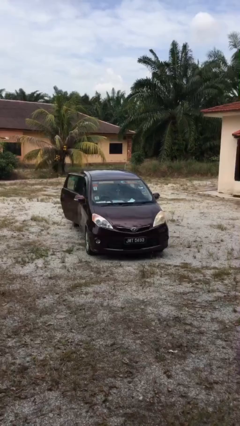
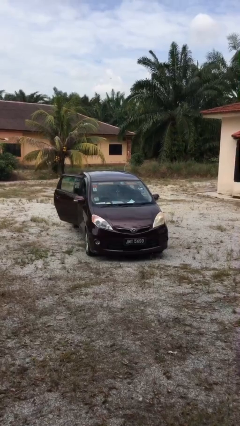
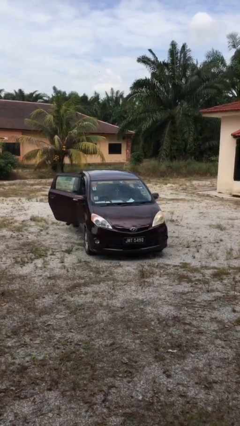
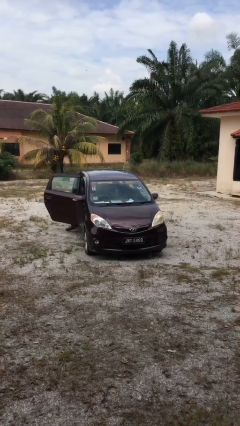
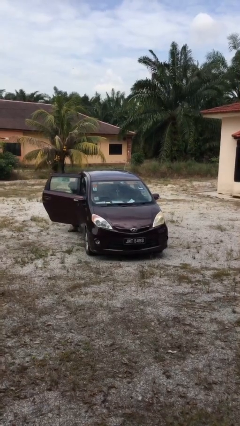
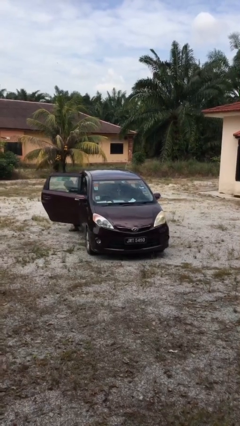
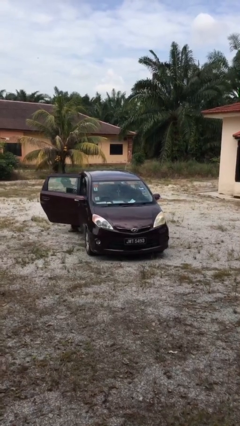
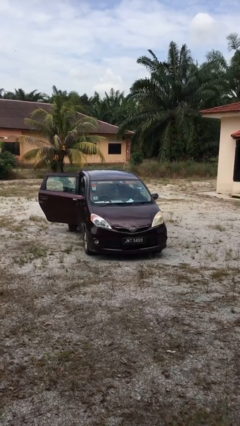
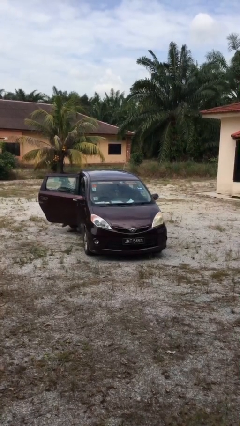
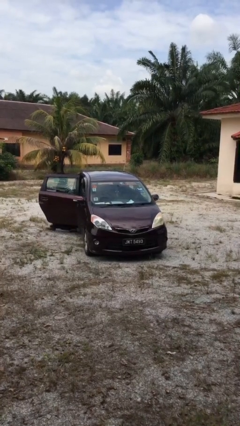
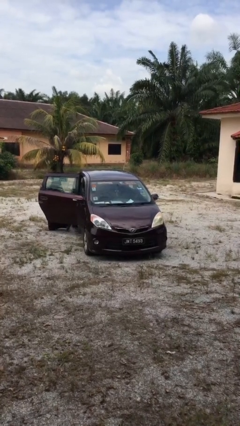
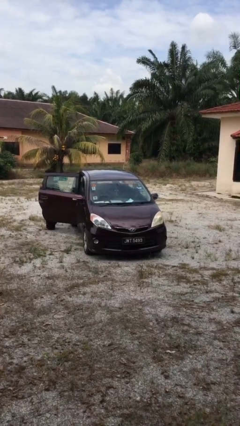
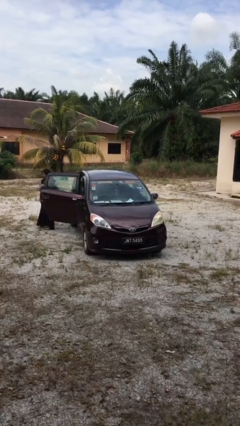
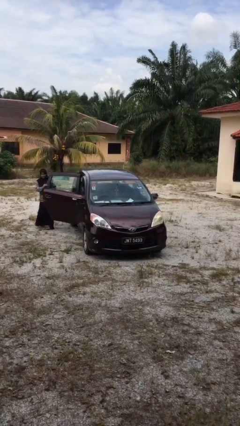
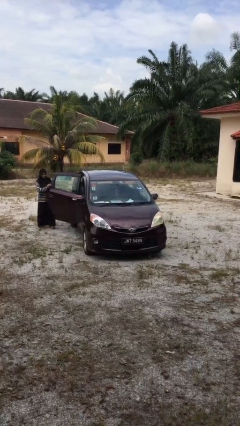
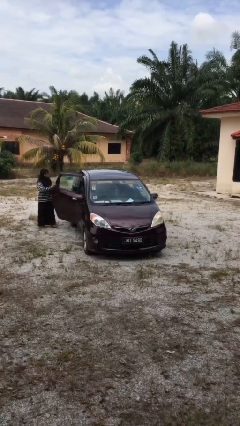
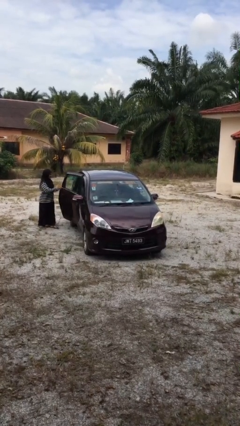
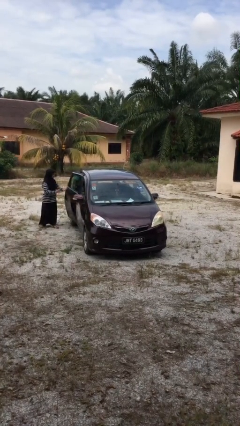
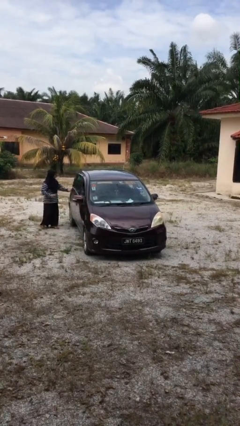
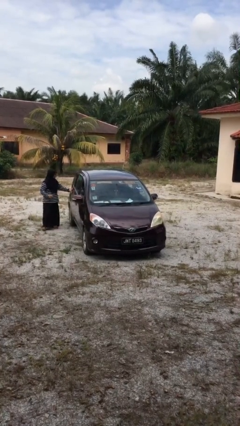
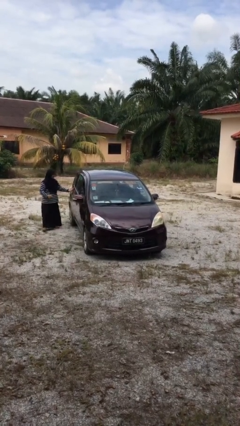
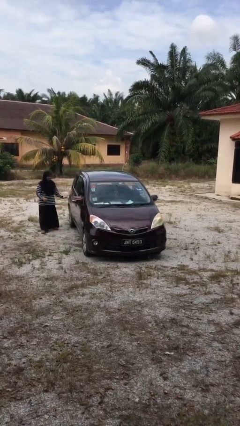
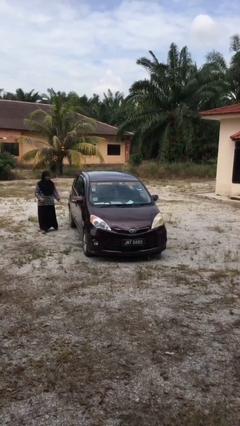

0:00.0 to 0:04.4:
car drops off person

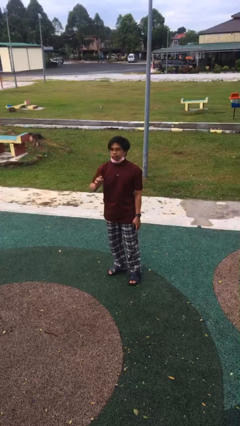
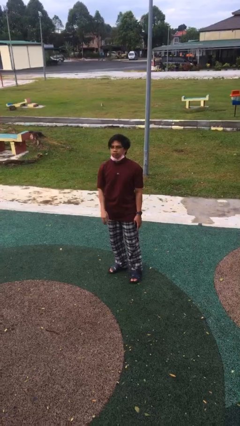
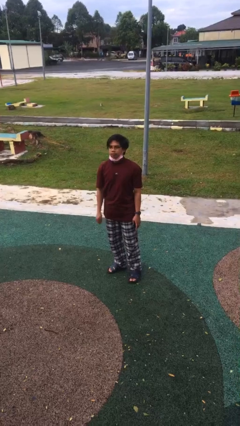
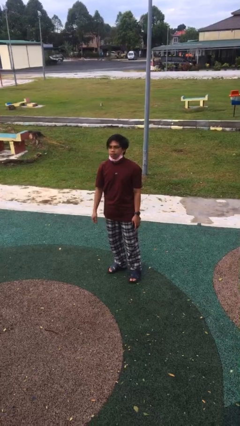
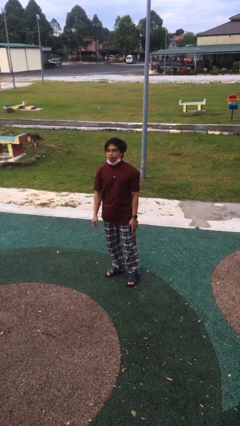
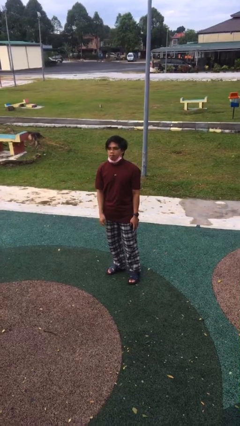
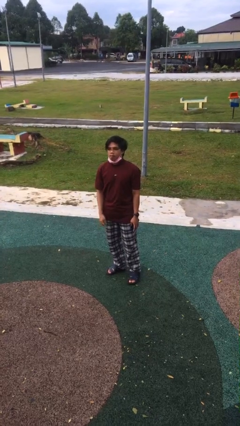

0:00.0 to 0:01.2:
person gestures lower hand

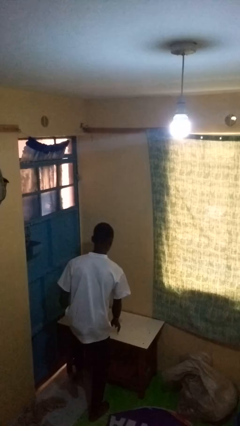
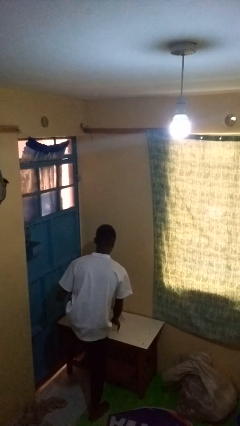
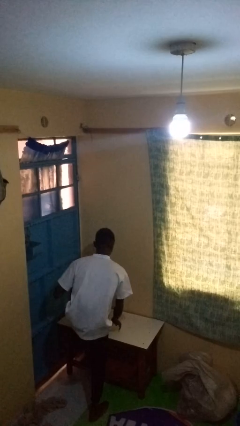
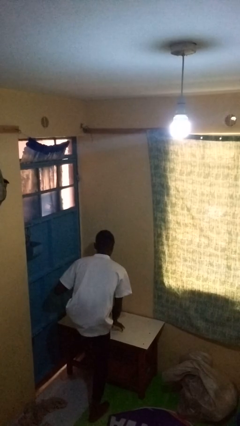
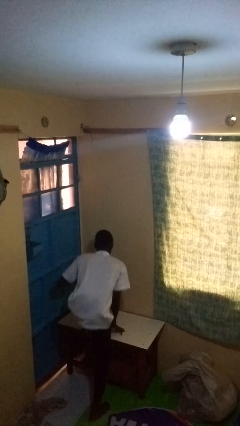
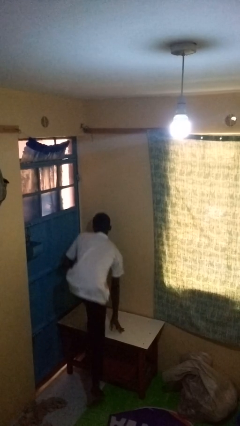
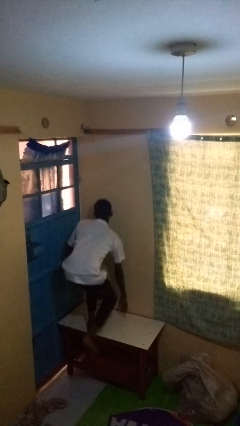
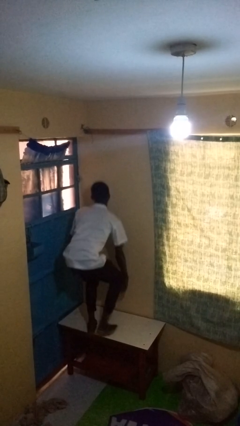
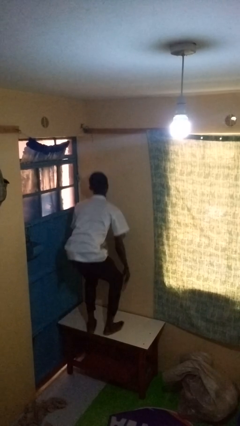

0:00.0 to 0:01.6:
person climbs on table

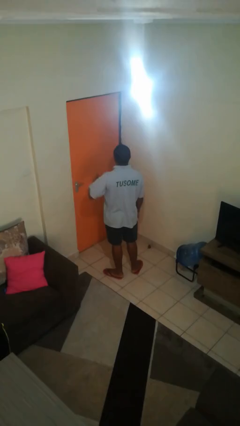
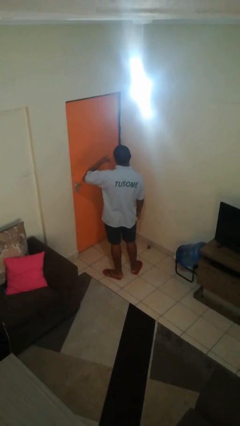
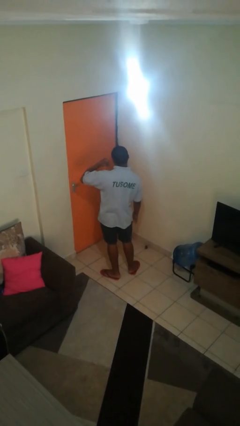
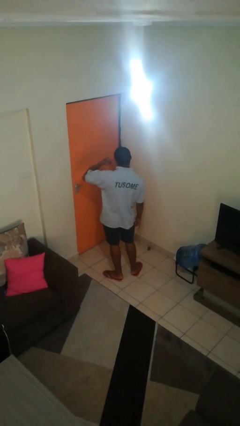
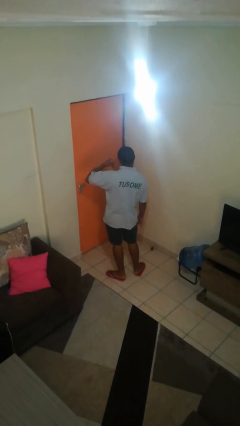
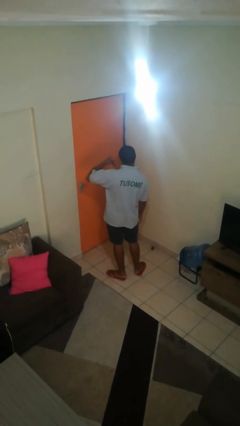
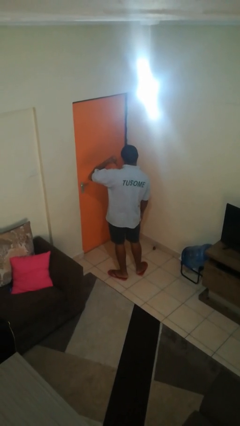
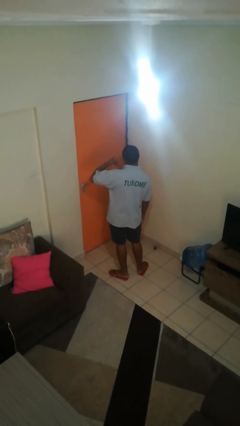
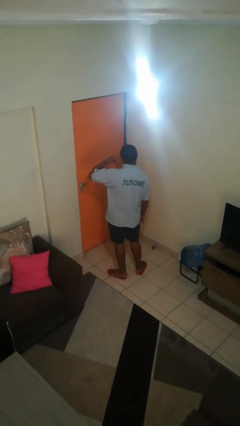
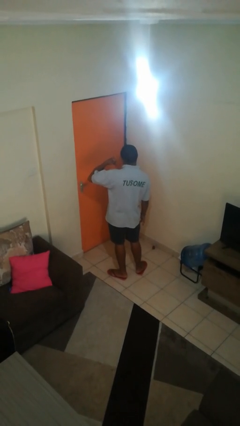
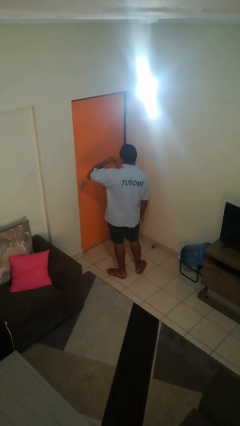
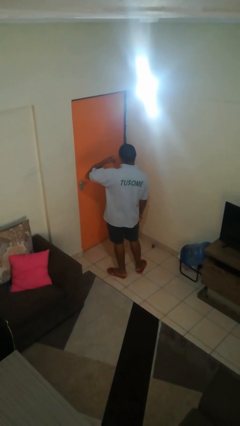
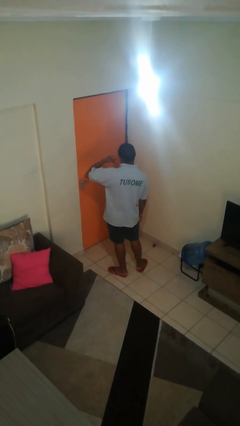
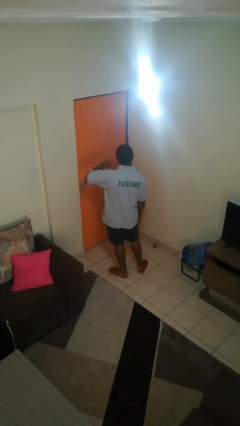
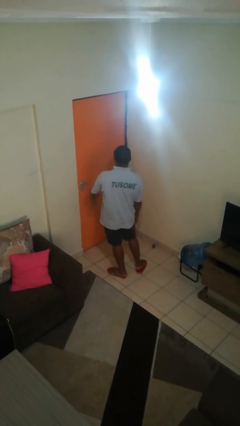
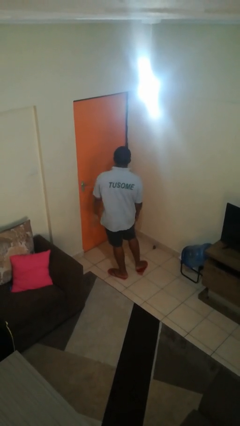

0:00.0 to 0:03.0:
person gestures call me

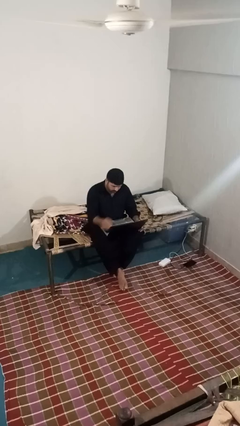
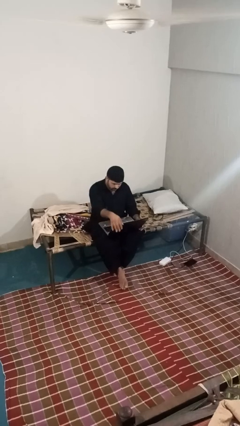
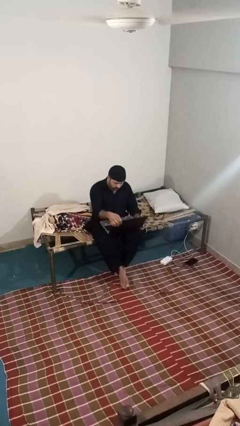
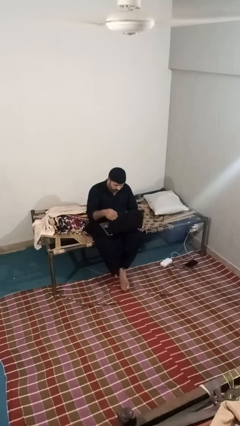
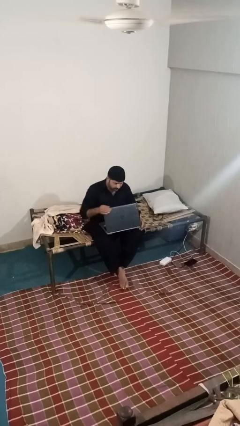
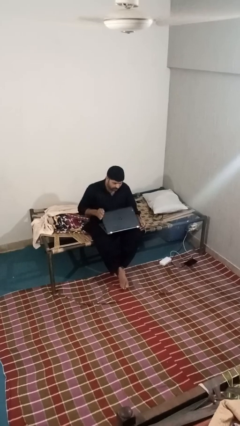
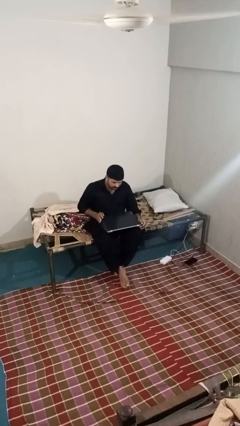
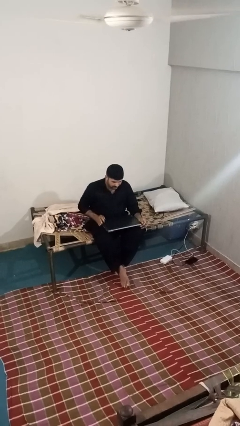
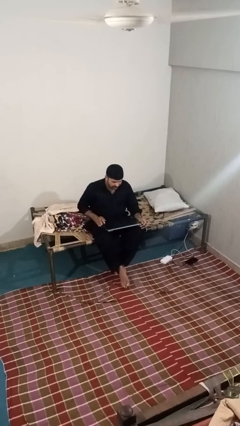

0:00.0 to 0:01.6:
person closes laptop

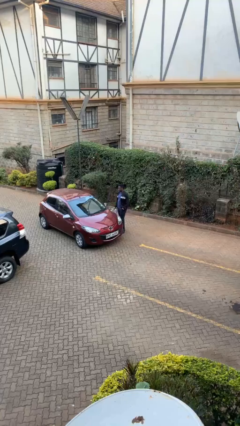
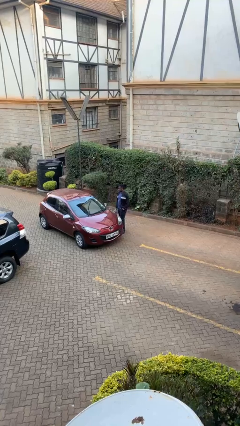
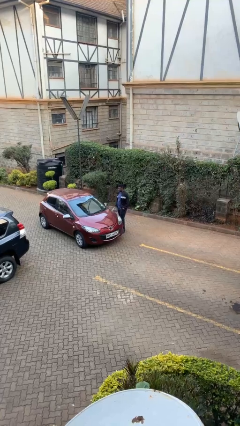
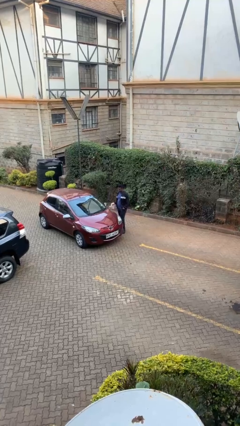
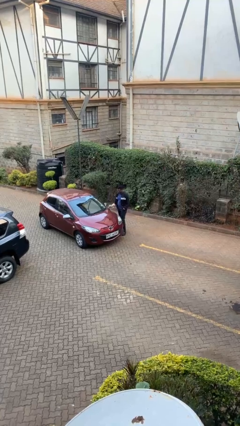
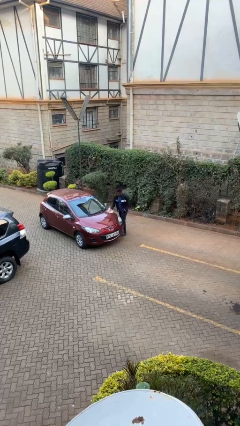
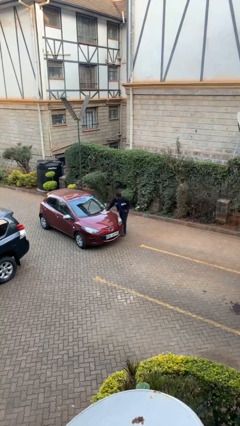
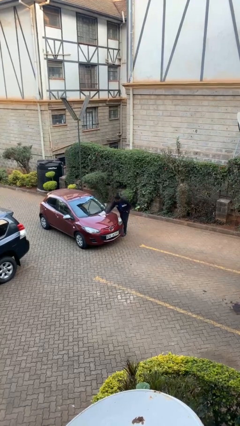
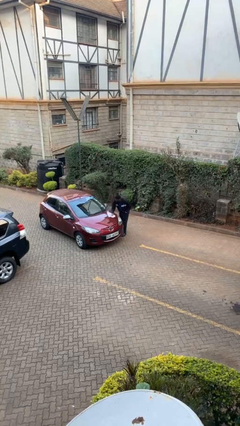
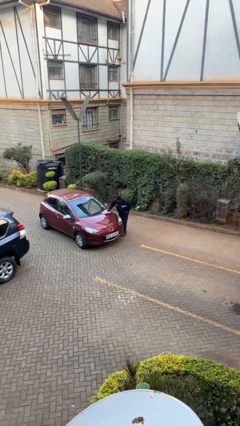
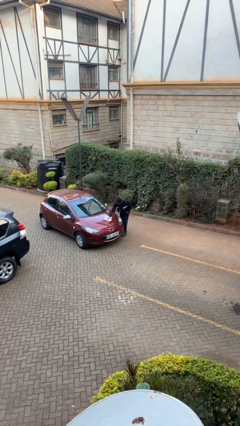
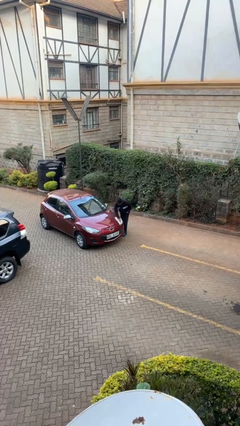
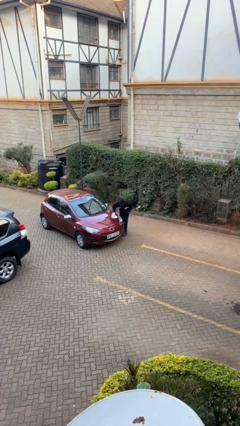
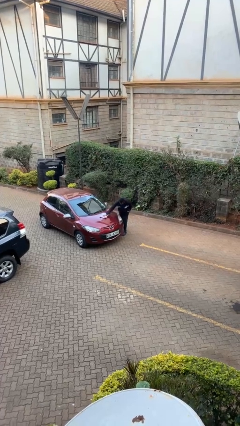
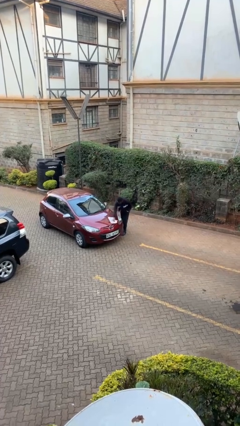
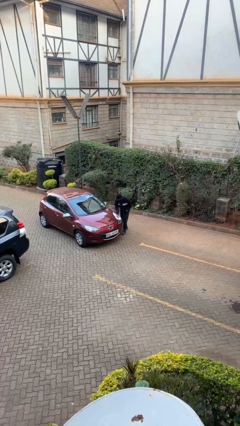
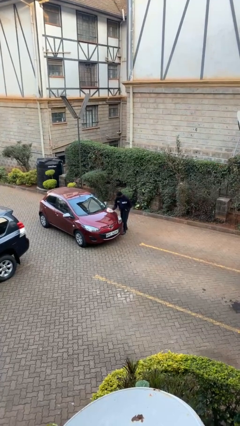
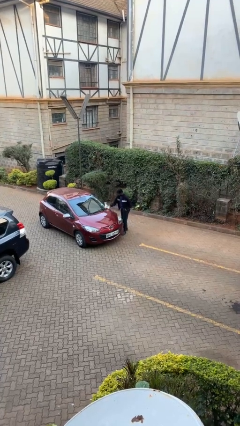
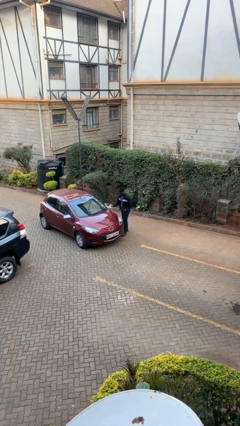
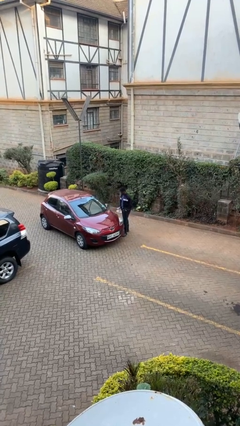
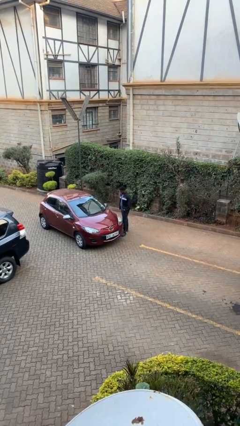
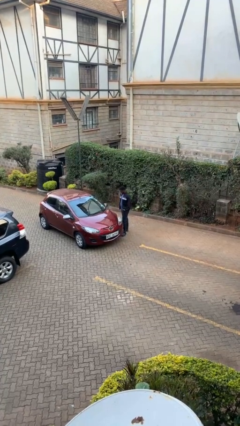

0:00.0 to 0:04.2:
person polishes car with rag

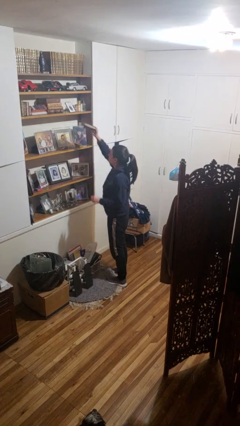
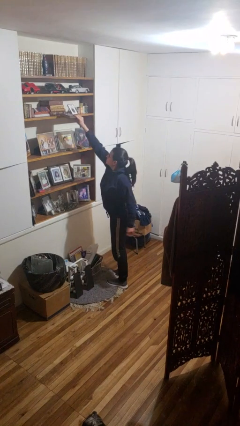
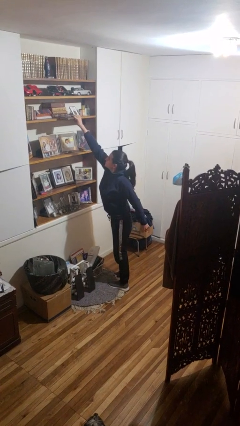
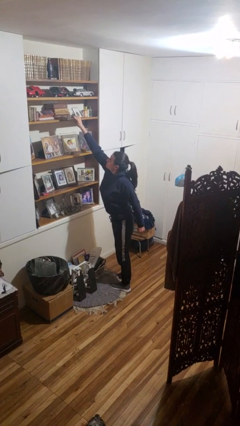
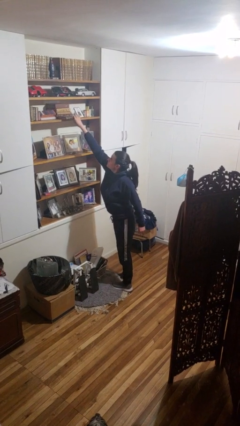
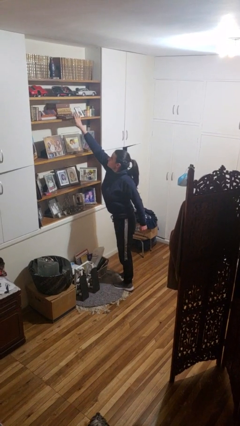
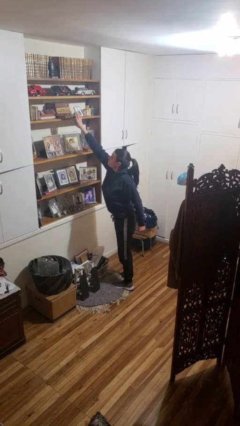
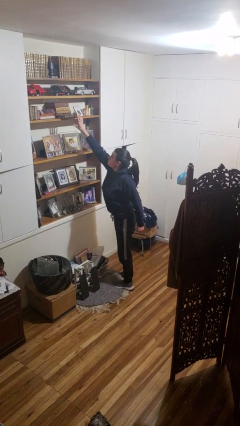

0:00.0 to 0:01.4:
person puts down object on shelf
